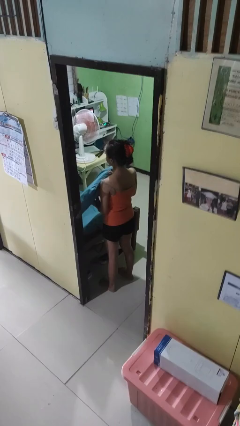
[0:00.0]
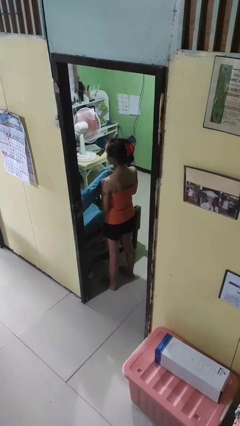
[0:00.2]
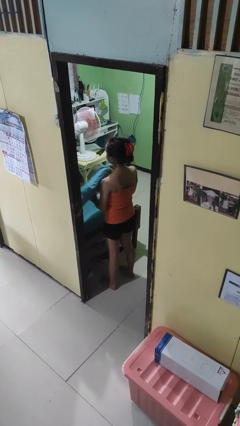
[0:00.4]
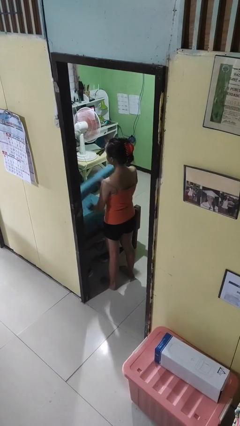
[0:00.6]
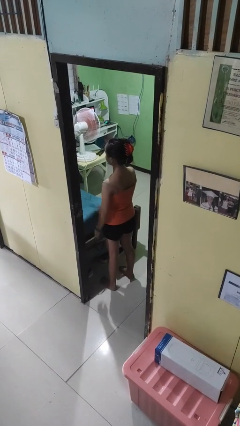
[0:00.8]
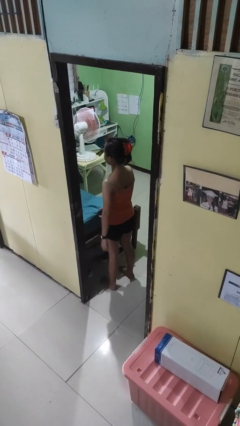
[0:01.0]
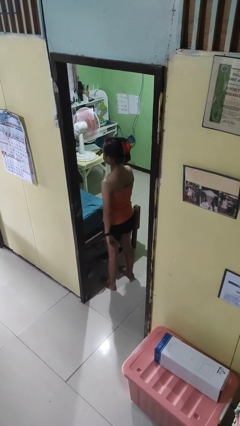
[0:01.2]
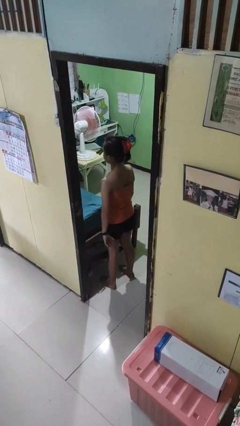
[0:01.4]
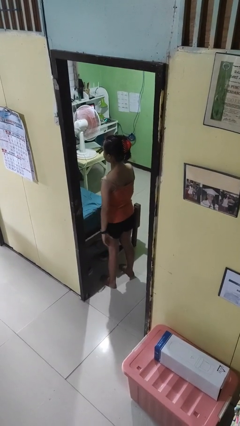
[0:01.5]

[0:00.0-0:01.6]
person puts down object on bed

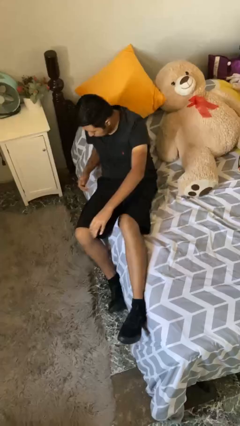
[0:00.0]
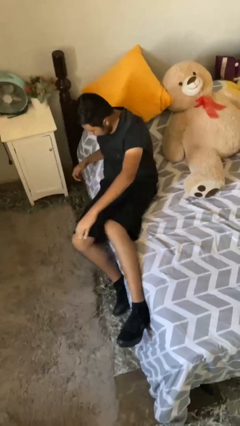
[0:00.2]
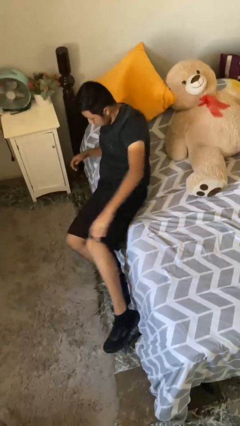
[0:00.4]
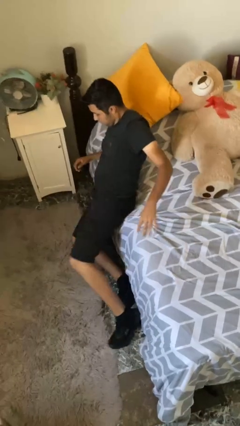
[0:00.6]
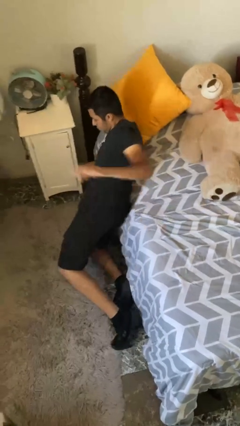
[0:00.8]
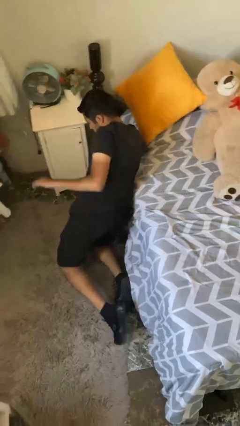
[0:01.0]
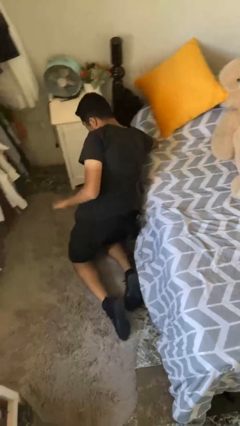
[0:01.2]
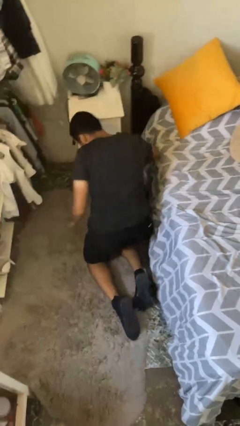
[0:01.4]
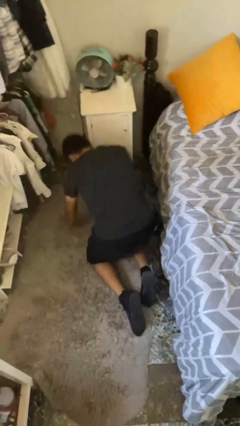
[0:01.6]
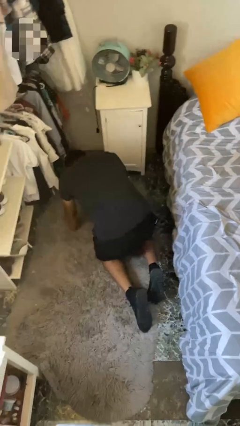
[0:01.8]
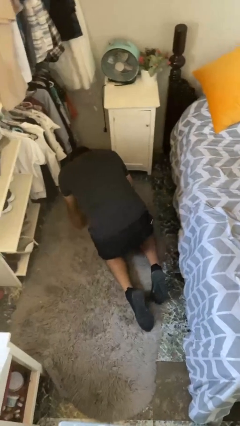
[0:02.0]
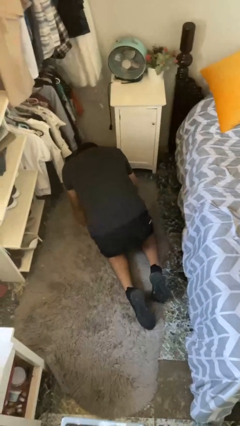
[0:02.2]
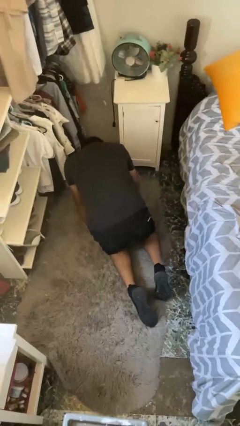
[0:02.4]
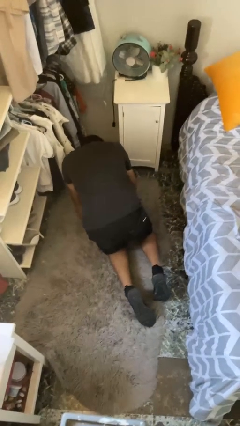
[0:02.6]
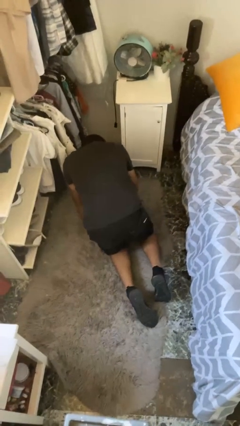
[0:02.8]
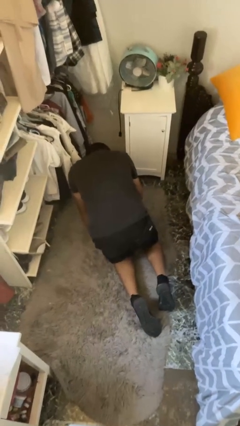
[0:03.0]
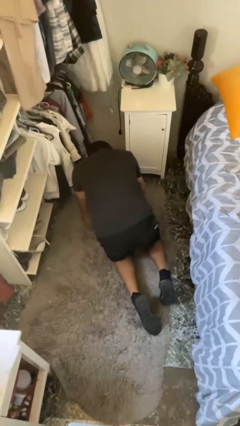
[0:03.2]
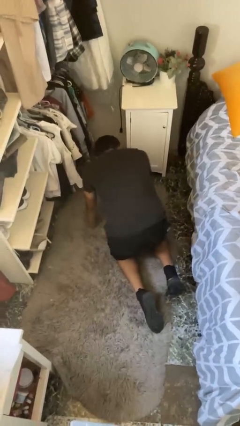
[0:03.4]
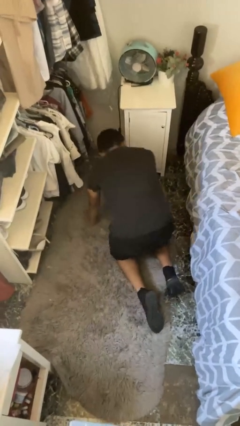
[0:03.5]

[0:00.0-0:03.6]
person falls from bed

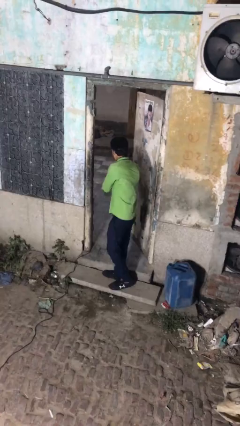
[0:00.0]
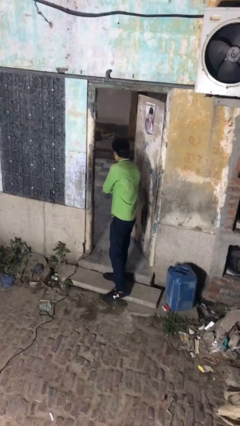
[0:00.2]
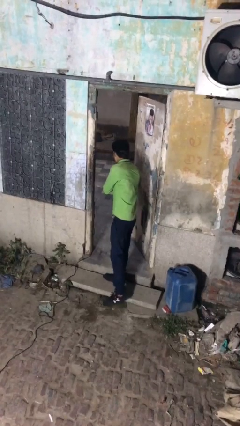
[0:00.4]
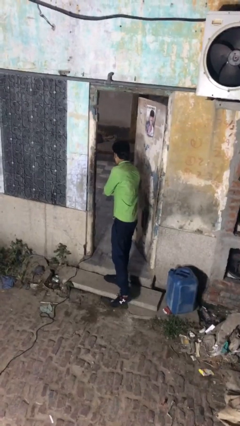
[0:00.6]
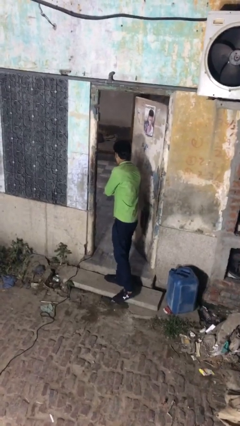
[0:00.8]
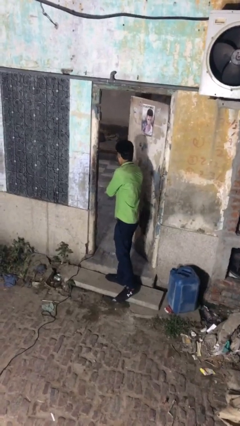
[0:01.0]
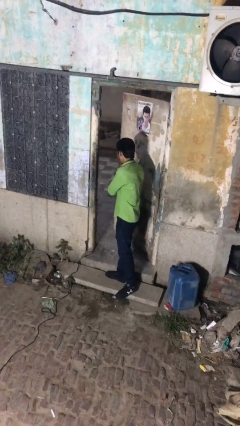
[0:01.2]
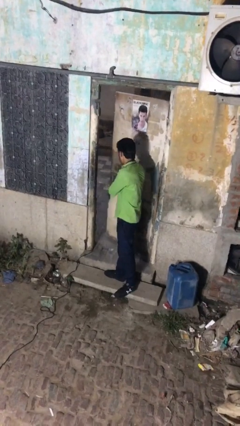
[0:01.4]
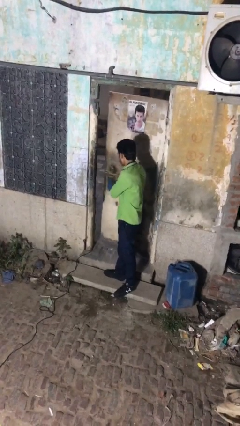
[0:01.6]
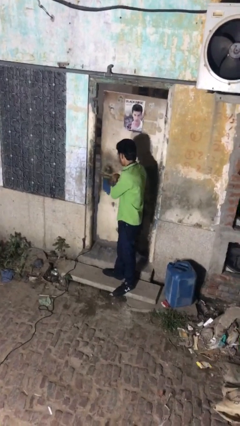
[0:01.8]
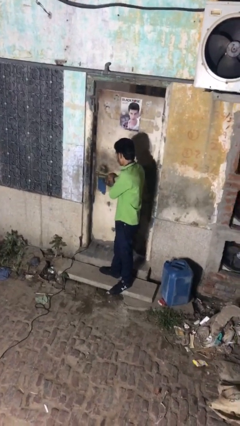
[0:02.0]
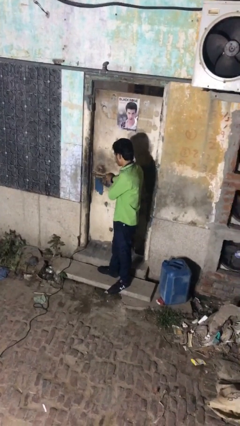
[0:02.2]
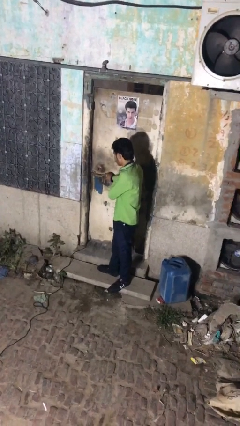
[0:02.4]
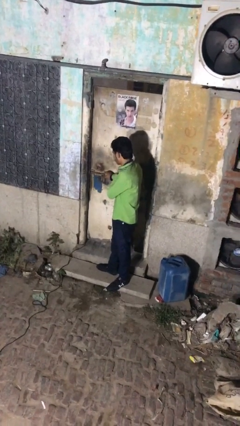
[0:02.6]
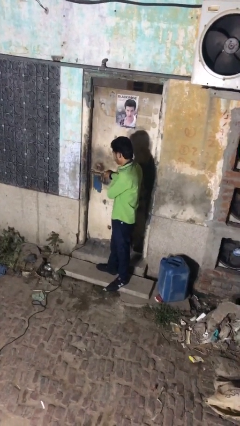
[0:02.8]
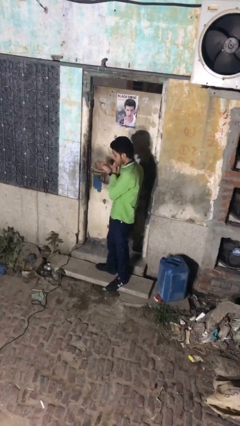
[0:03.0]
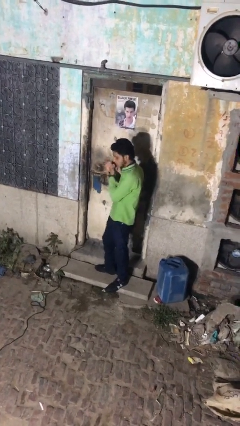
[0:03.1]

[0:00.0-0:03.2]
person closes facility door

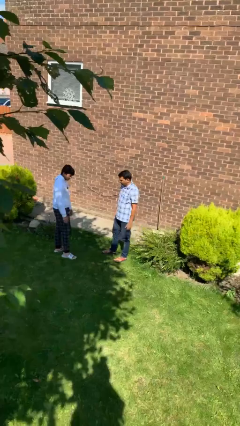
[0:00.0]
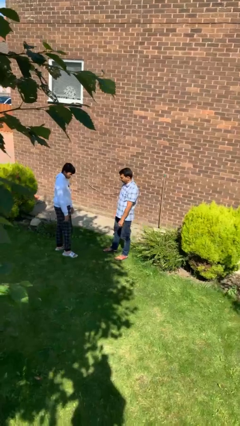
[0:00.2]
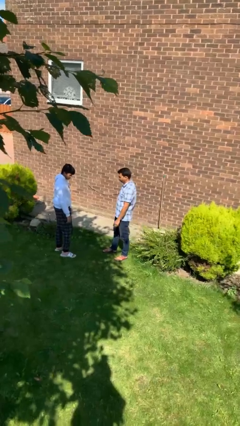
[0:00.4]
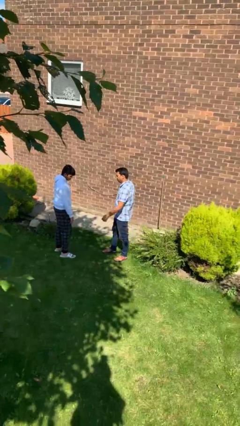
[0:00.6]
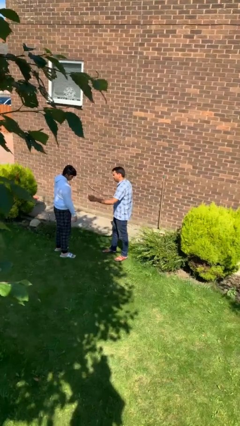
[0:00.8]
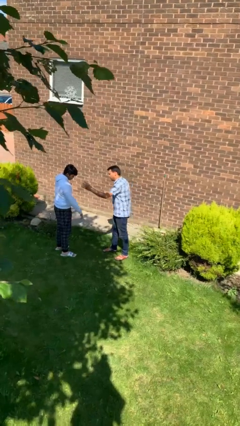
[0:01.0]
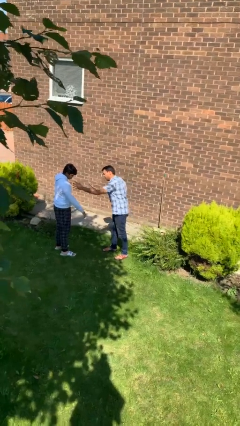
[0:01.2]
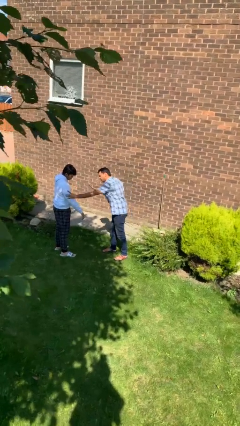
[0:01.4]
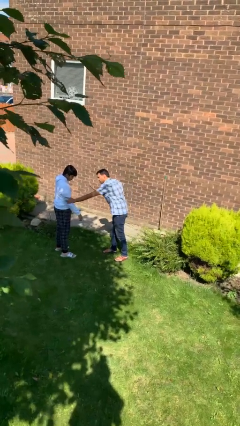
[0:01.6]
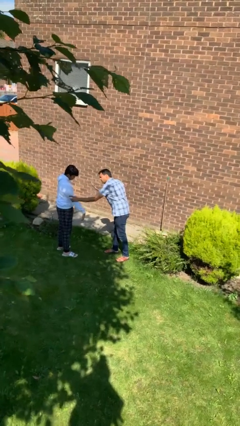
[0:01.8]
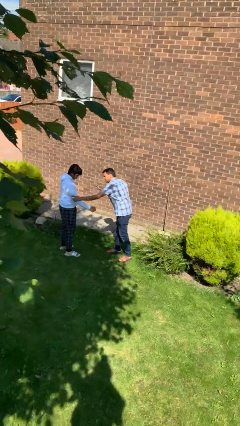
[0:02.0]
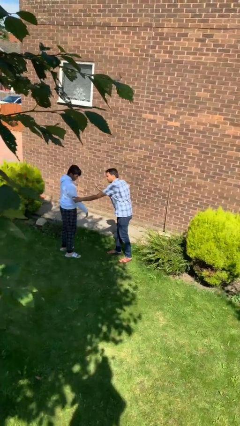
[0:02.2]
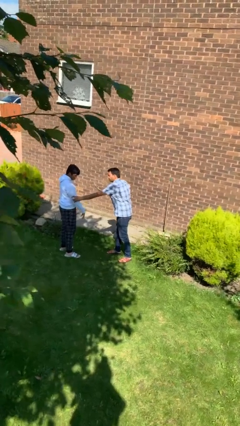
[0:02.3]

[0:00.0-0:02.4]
person grabs person by bicep

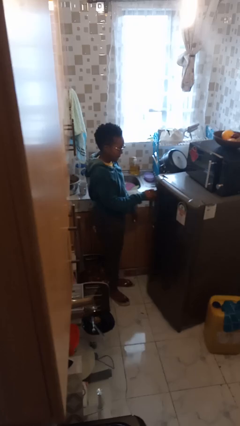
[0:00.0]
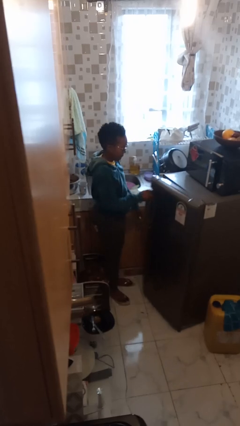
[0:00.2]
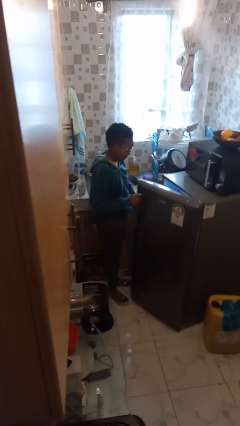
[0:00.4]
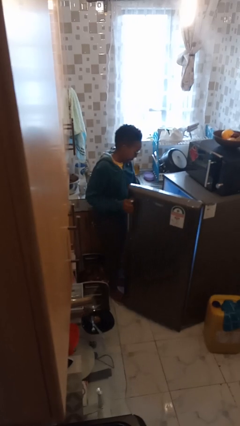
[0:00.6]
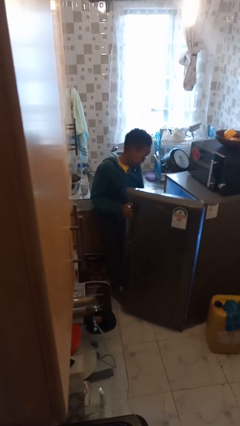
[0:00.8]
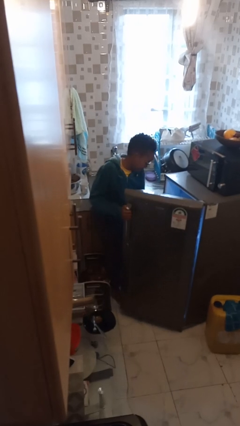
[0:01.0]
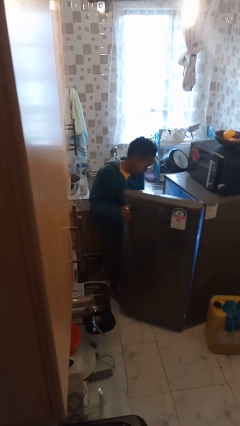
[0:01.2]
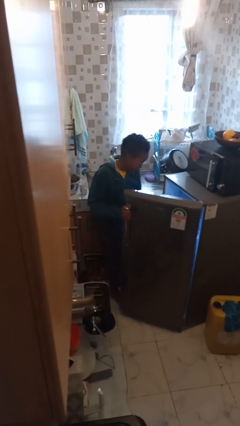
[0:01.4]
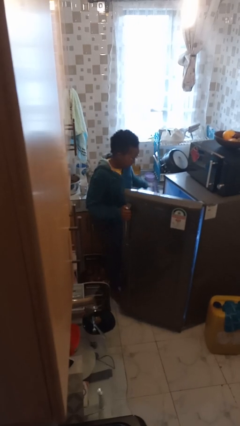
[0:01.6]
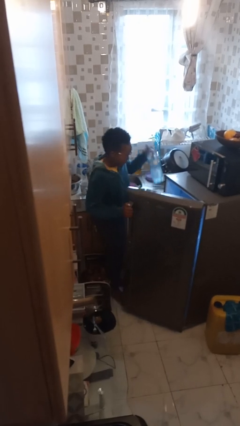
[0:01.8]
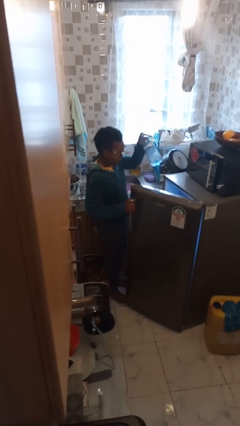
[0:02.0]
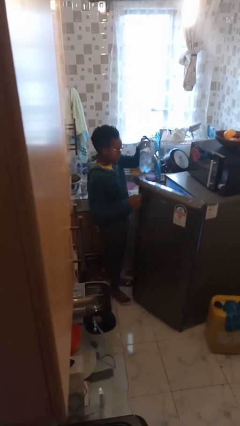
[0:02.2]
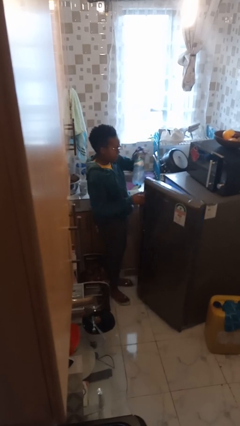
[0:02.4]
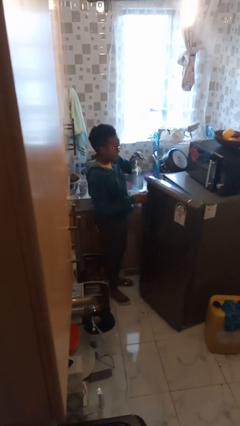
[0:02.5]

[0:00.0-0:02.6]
person takes object from refrigerator

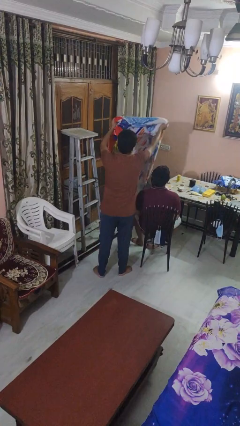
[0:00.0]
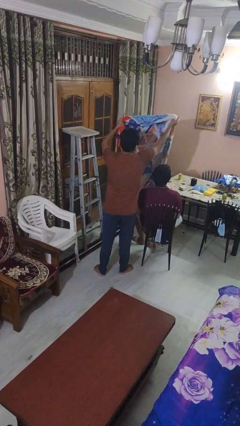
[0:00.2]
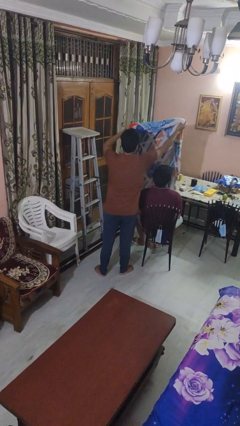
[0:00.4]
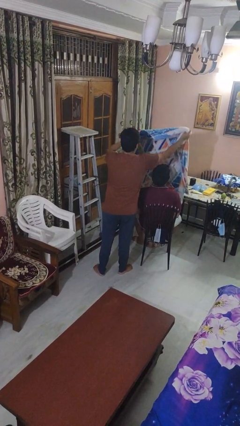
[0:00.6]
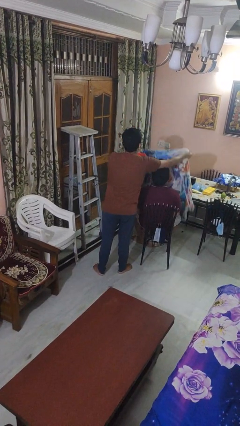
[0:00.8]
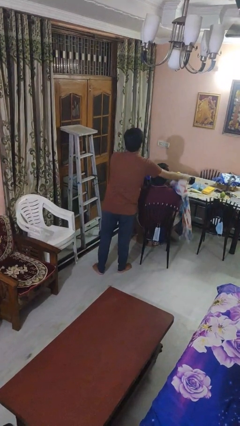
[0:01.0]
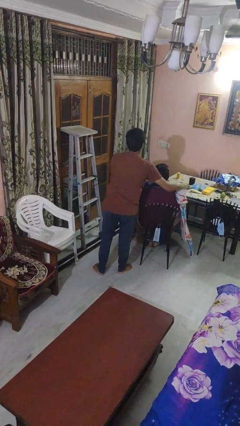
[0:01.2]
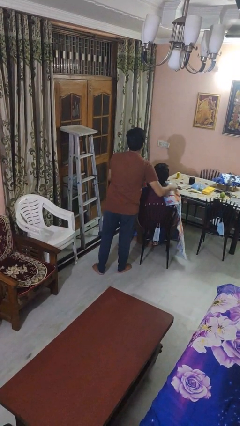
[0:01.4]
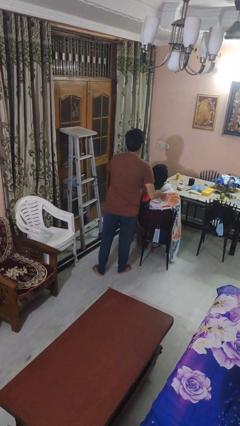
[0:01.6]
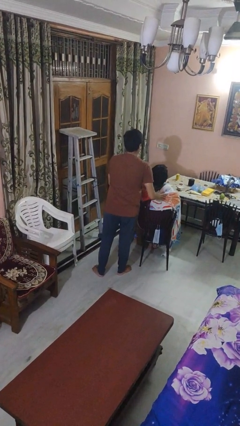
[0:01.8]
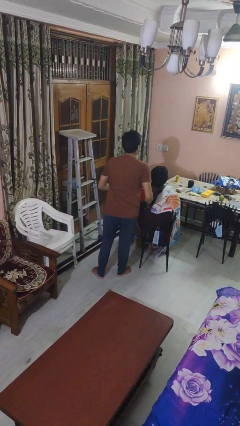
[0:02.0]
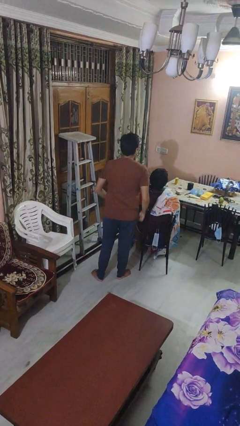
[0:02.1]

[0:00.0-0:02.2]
person covers friend with blanket

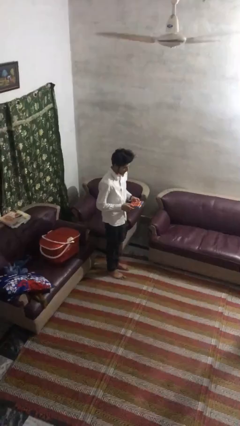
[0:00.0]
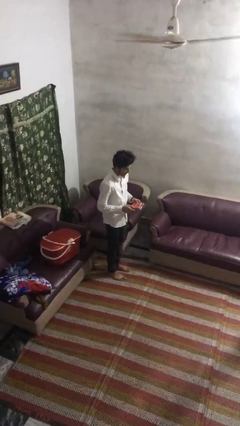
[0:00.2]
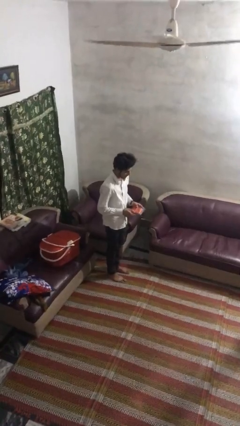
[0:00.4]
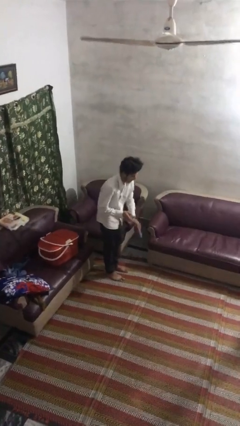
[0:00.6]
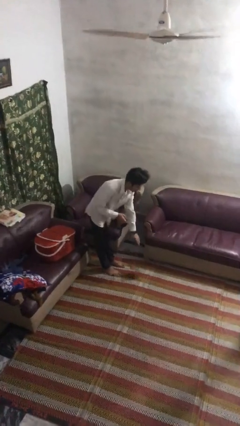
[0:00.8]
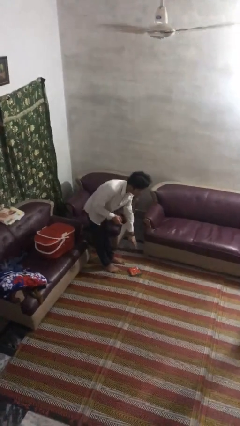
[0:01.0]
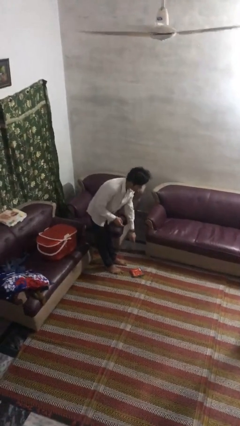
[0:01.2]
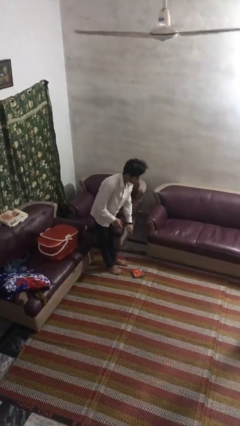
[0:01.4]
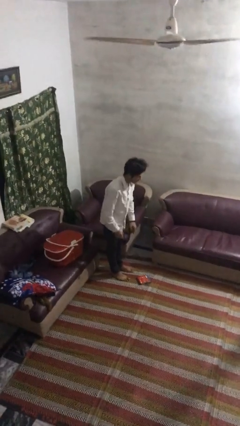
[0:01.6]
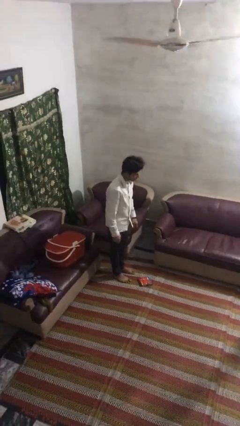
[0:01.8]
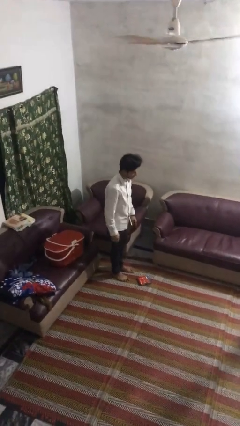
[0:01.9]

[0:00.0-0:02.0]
person drops object
